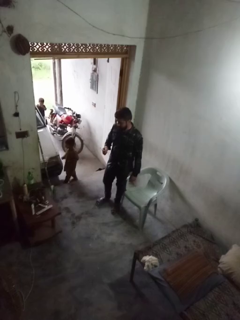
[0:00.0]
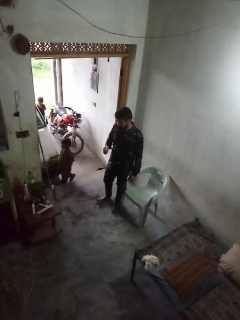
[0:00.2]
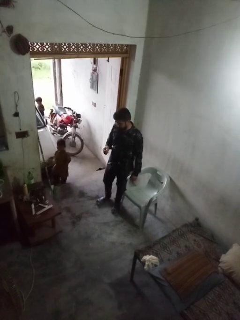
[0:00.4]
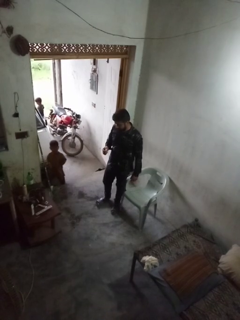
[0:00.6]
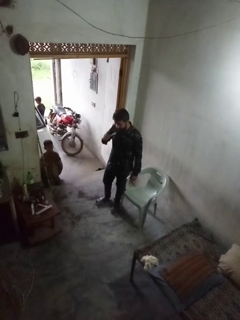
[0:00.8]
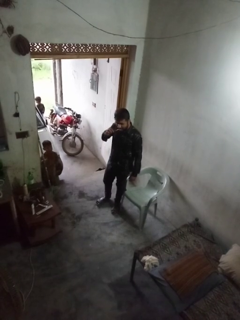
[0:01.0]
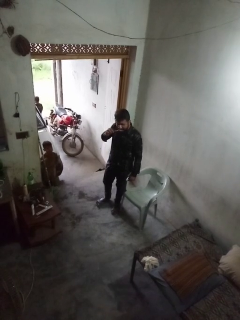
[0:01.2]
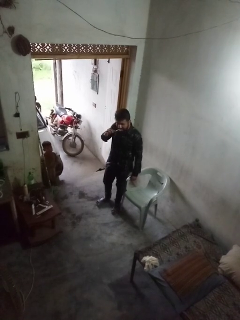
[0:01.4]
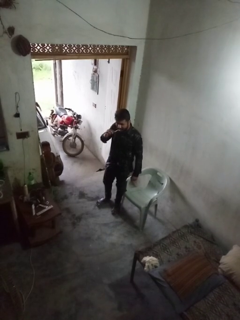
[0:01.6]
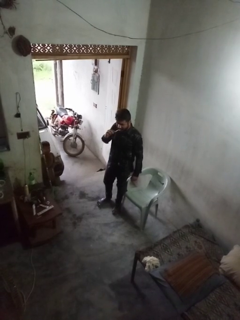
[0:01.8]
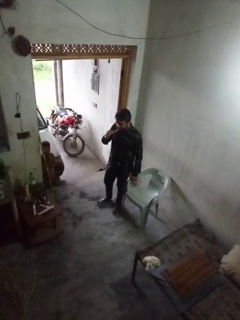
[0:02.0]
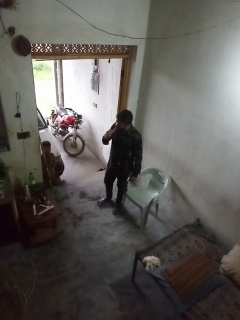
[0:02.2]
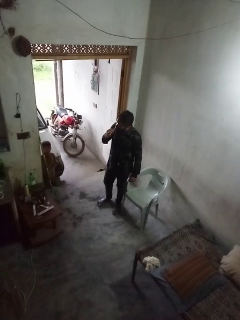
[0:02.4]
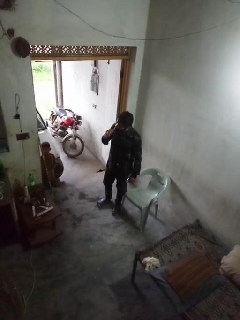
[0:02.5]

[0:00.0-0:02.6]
person brushes teeth

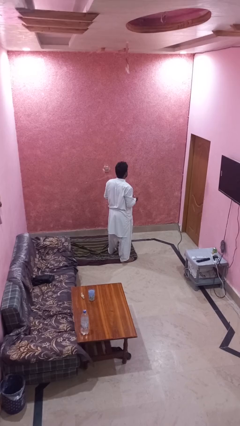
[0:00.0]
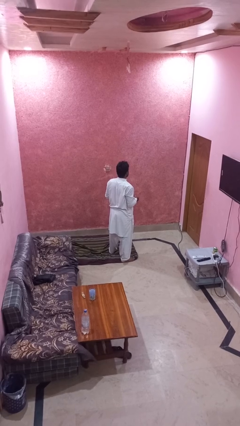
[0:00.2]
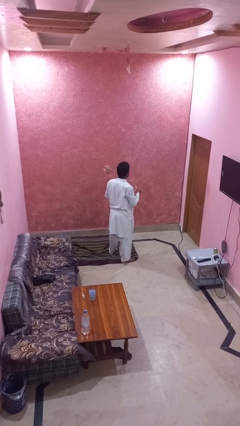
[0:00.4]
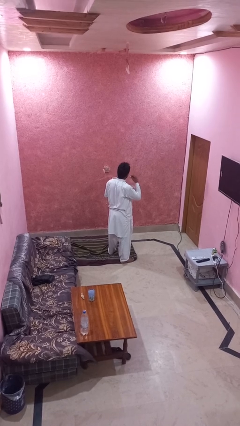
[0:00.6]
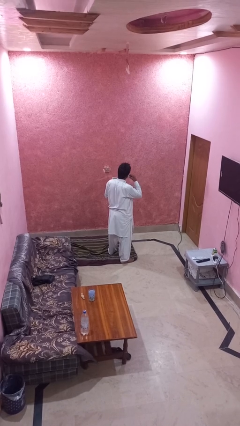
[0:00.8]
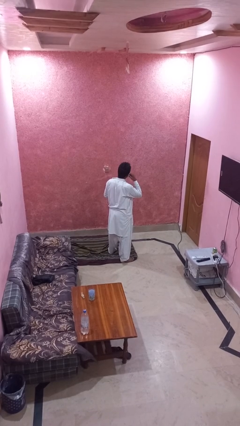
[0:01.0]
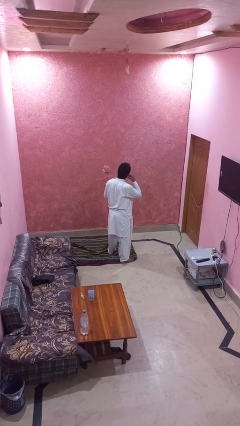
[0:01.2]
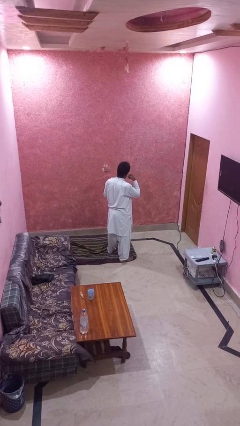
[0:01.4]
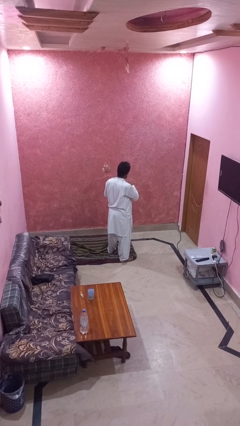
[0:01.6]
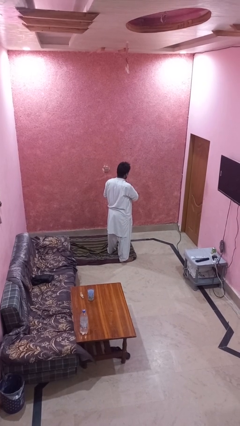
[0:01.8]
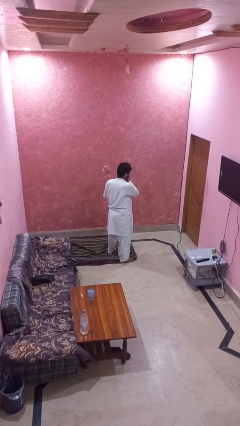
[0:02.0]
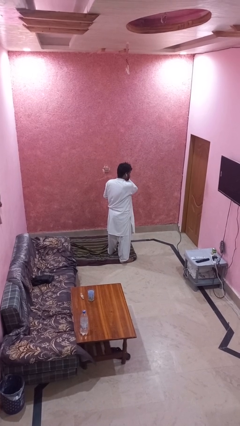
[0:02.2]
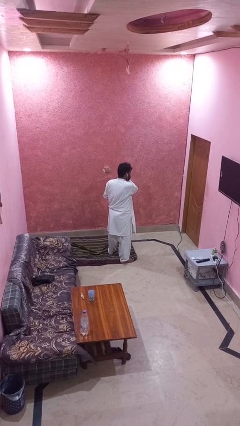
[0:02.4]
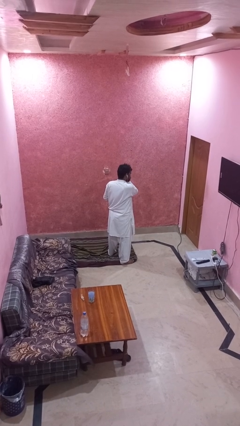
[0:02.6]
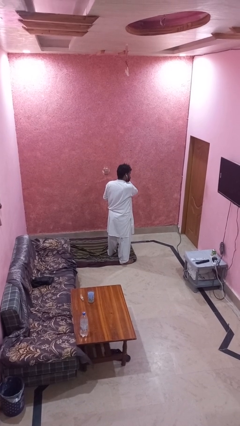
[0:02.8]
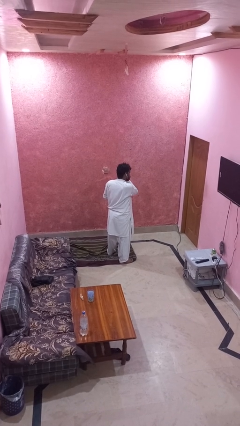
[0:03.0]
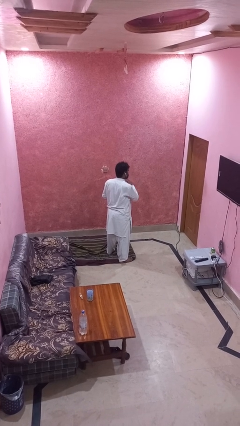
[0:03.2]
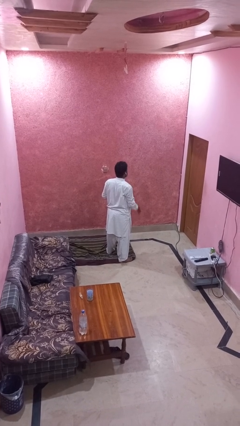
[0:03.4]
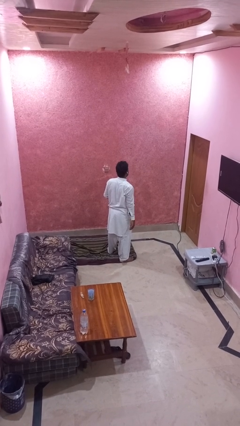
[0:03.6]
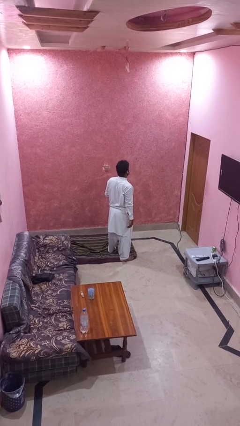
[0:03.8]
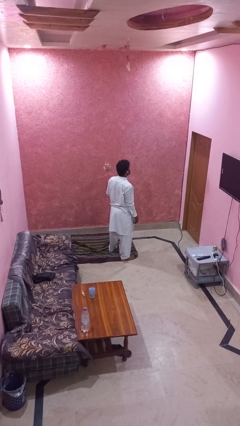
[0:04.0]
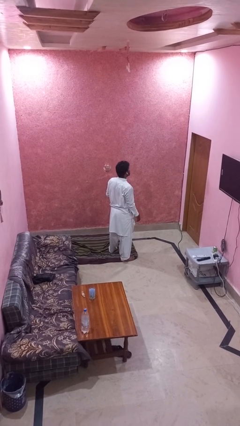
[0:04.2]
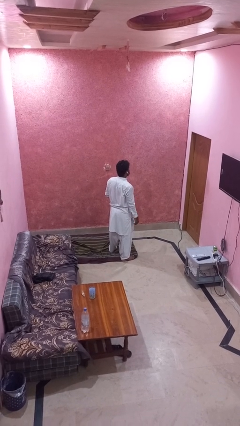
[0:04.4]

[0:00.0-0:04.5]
person puts on headphones

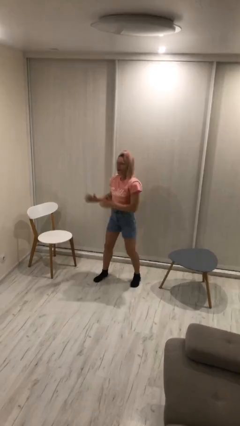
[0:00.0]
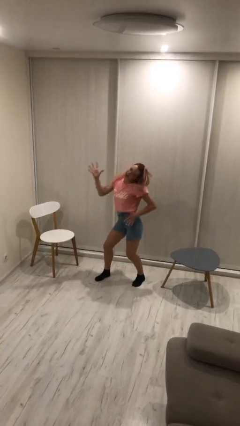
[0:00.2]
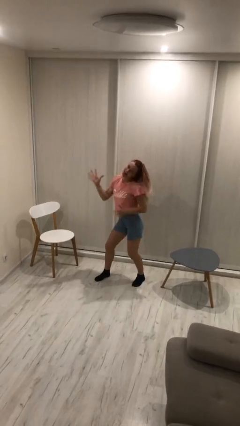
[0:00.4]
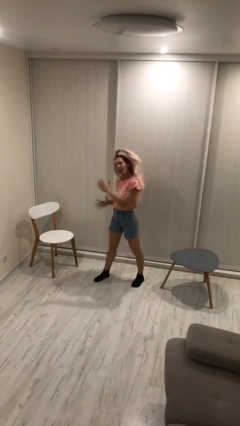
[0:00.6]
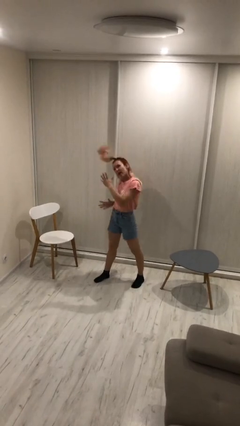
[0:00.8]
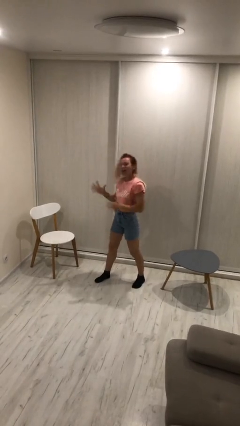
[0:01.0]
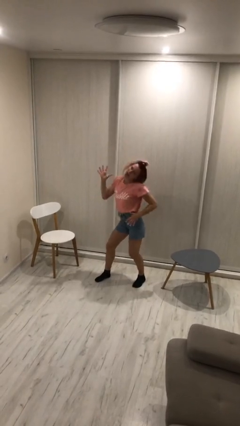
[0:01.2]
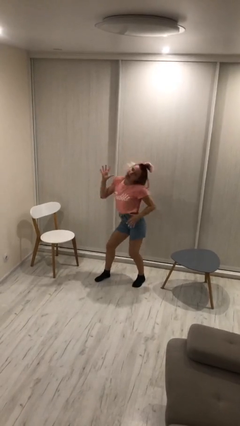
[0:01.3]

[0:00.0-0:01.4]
person dances in place

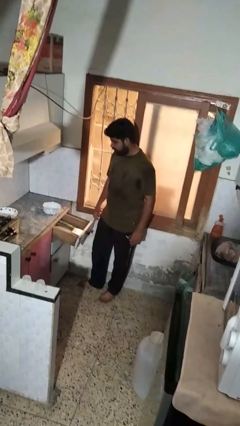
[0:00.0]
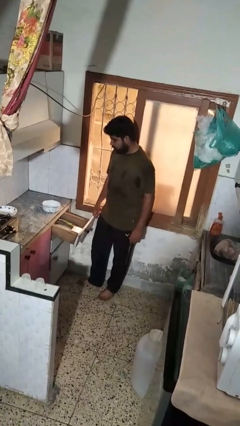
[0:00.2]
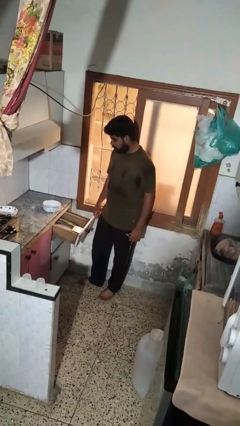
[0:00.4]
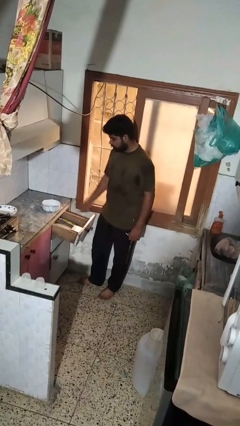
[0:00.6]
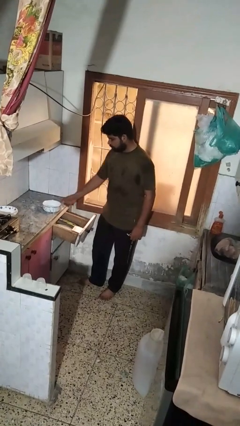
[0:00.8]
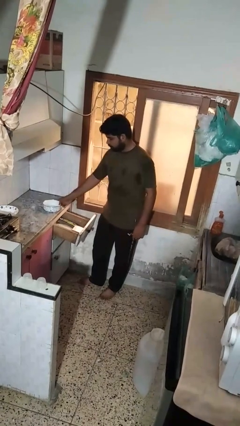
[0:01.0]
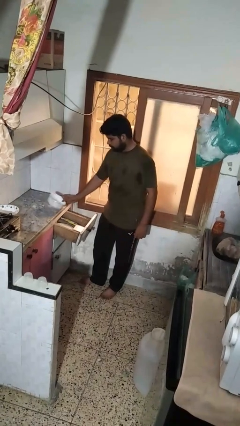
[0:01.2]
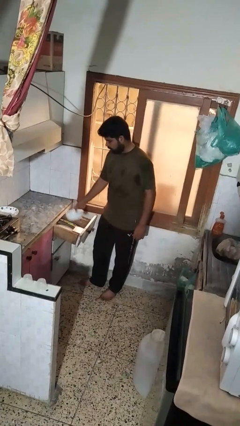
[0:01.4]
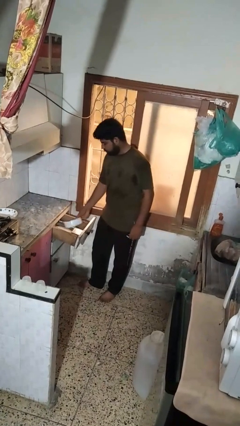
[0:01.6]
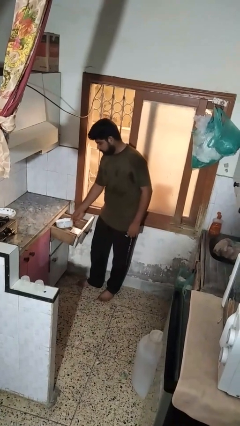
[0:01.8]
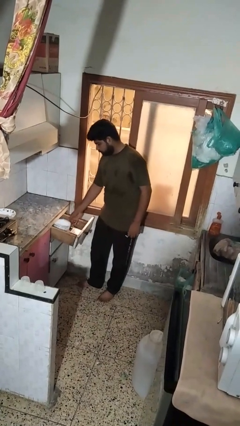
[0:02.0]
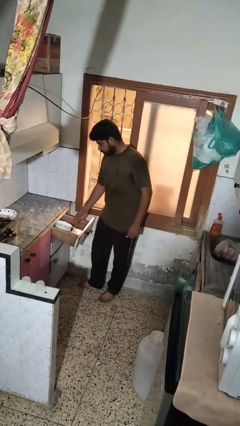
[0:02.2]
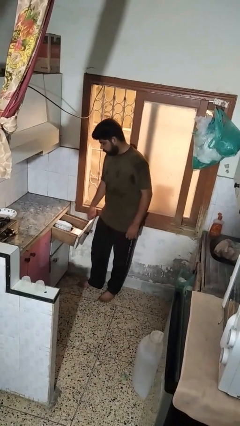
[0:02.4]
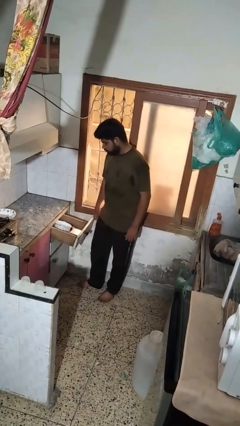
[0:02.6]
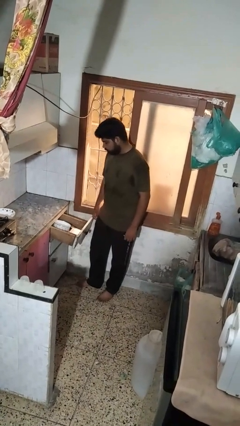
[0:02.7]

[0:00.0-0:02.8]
person puts object into kitchen drawer

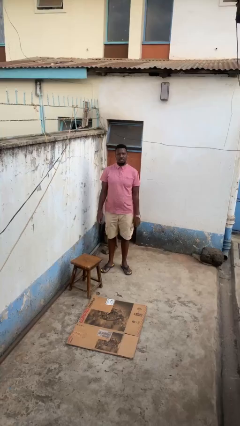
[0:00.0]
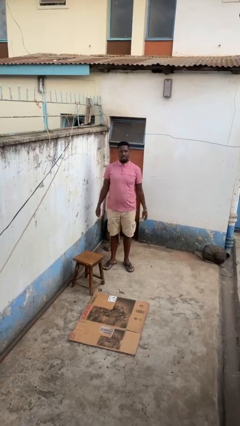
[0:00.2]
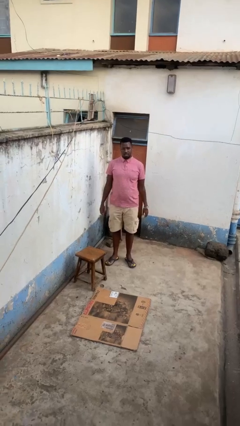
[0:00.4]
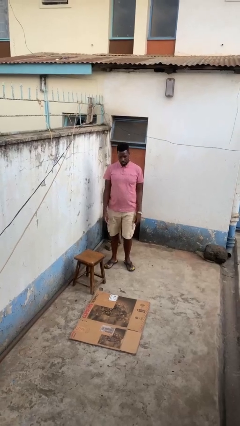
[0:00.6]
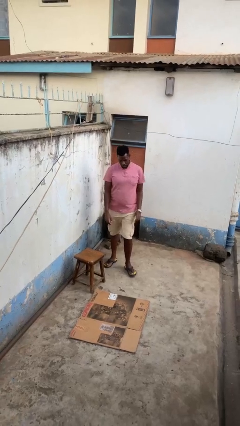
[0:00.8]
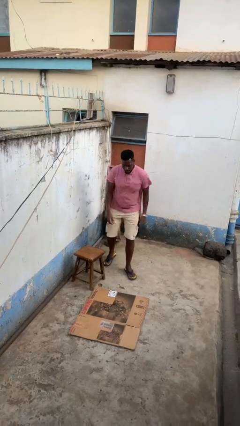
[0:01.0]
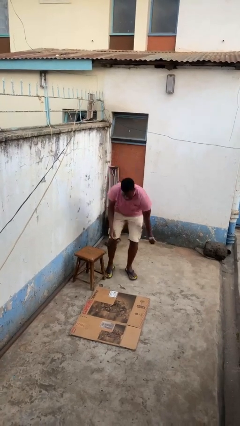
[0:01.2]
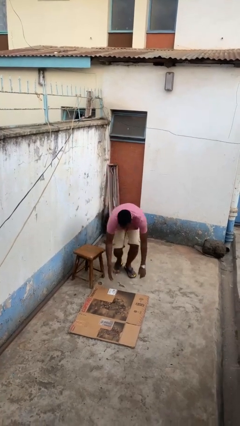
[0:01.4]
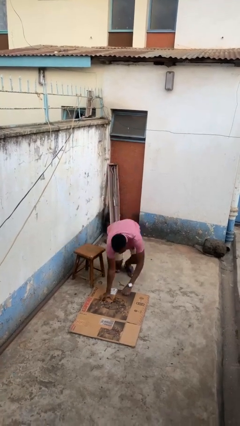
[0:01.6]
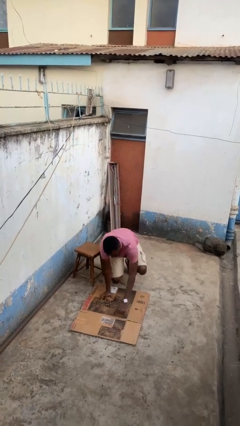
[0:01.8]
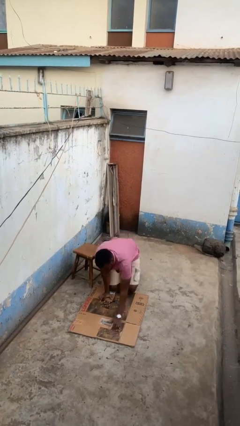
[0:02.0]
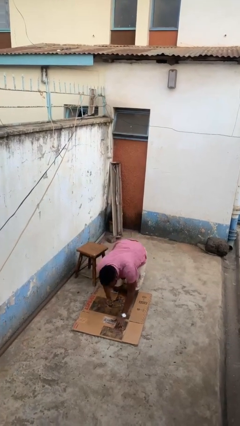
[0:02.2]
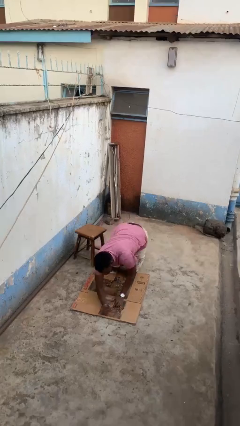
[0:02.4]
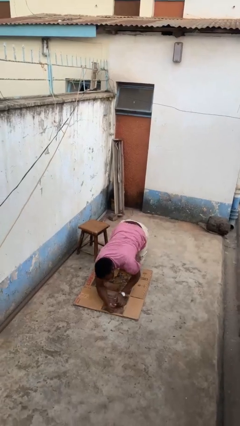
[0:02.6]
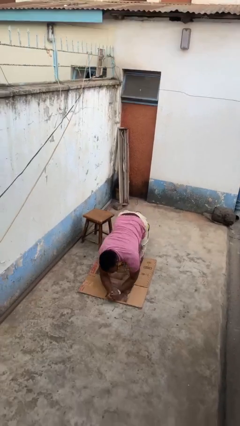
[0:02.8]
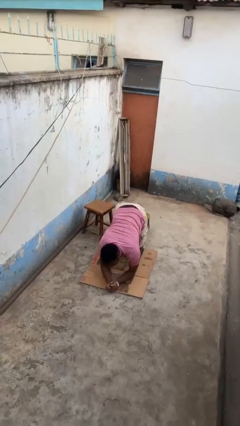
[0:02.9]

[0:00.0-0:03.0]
person trips on object on floor

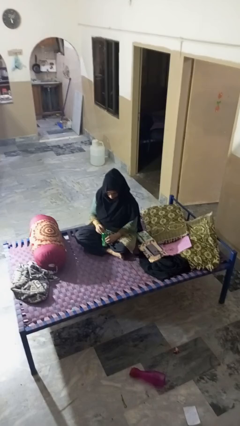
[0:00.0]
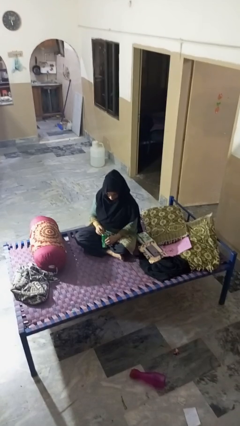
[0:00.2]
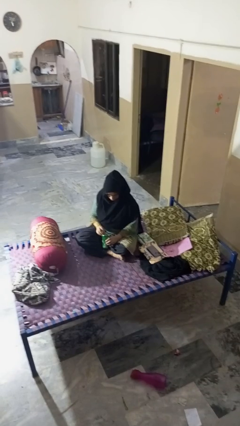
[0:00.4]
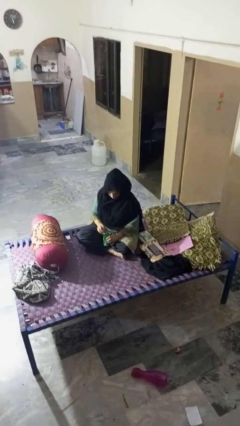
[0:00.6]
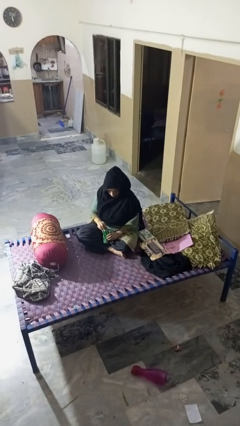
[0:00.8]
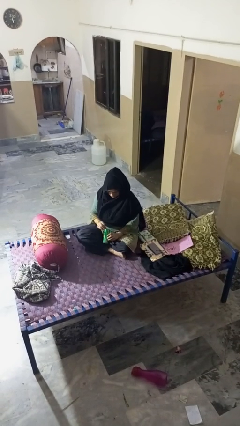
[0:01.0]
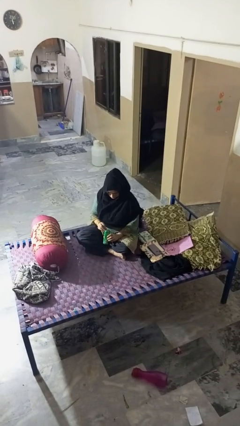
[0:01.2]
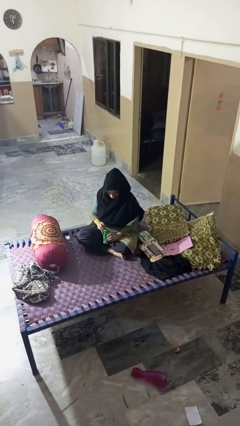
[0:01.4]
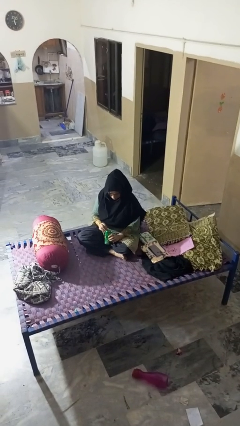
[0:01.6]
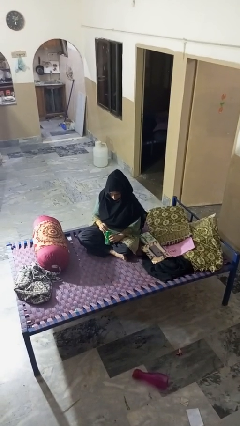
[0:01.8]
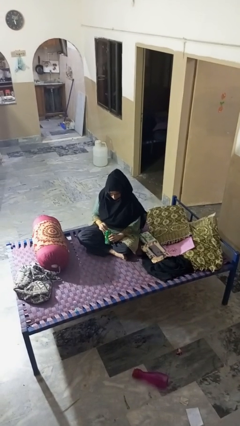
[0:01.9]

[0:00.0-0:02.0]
person opens can with can opener

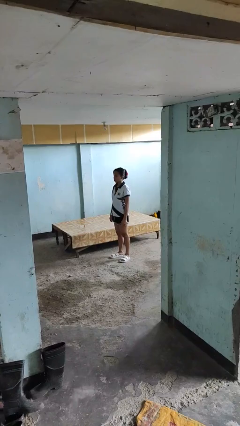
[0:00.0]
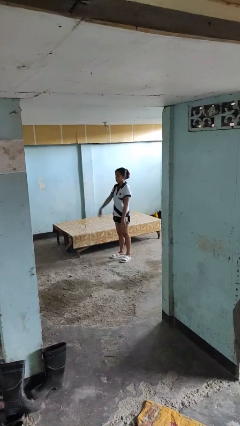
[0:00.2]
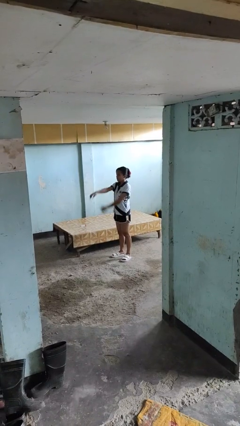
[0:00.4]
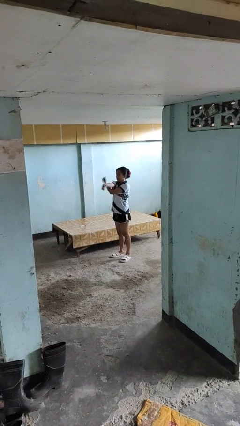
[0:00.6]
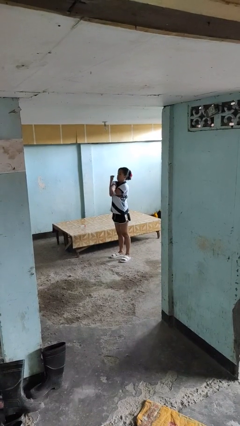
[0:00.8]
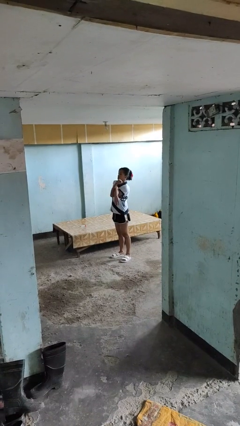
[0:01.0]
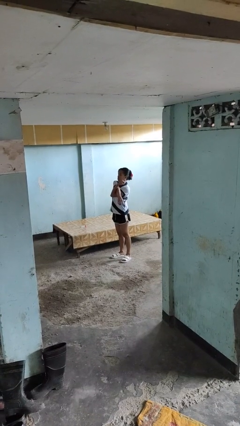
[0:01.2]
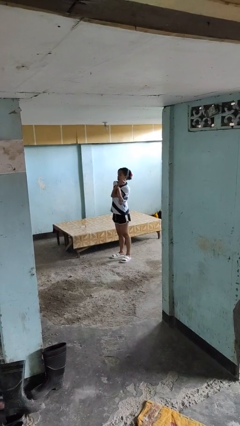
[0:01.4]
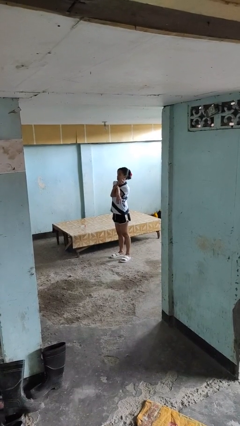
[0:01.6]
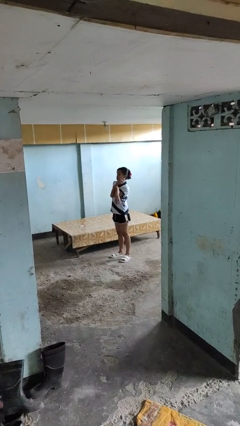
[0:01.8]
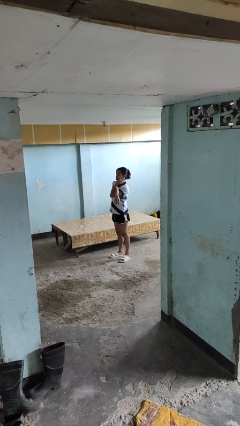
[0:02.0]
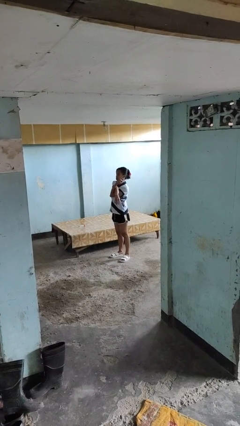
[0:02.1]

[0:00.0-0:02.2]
person crosses arms
